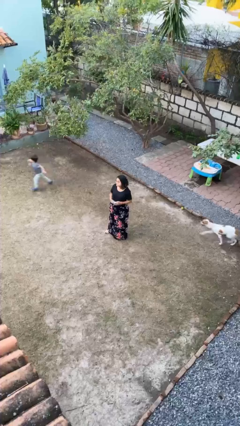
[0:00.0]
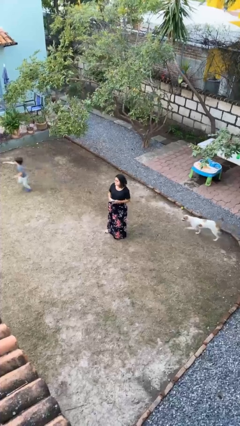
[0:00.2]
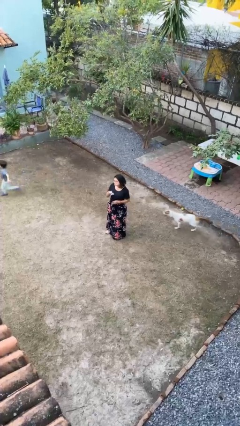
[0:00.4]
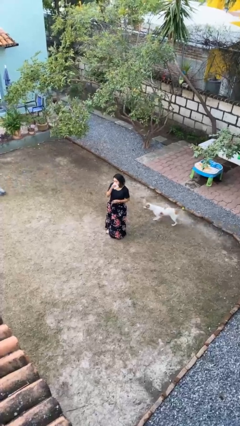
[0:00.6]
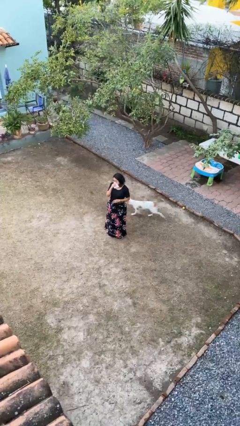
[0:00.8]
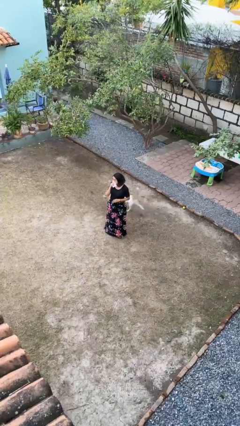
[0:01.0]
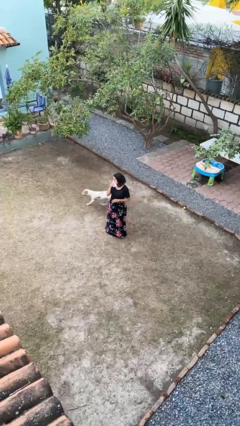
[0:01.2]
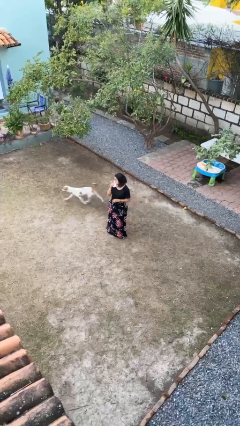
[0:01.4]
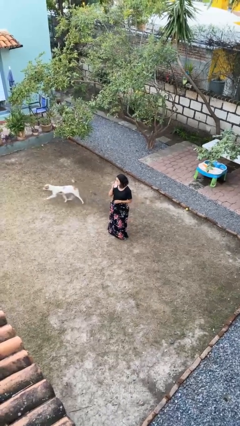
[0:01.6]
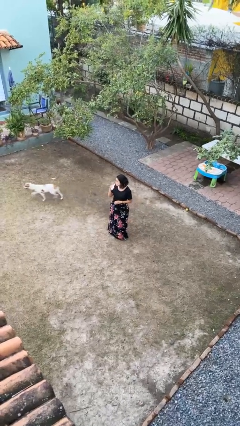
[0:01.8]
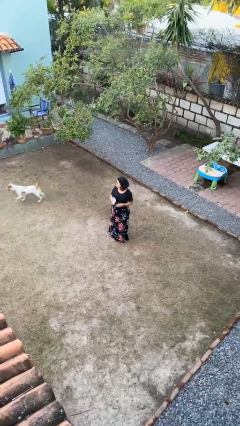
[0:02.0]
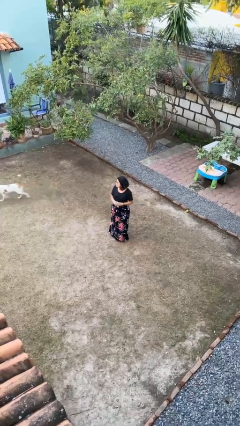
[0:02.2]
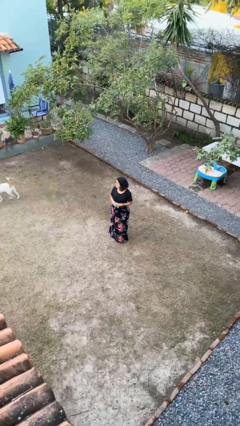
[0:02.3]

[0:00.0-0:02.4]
person wipes mouth with napkin

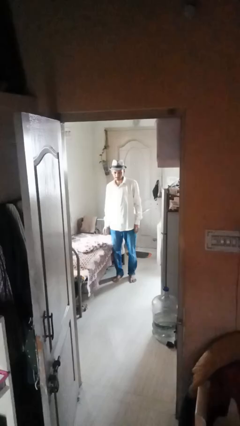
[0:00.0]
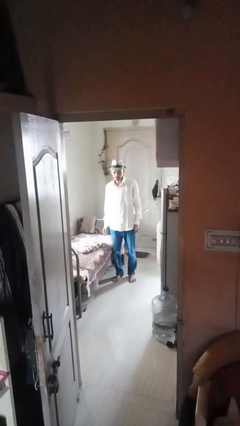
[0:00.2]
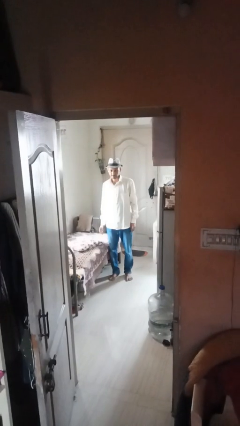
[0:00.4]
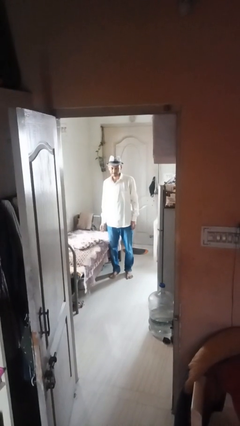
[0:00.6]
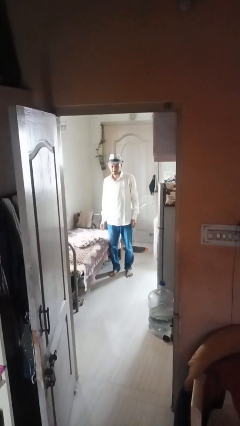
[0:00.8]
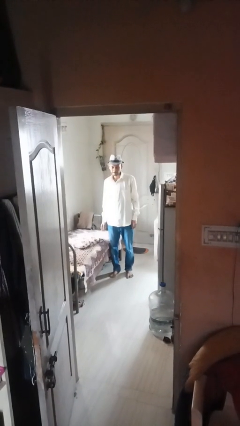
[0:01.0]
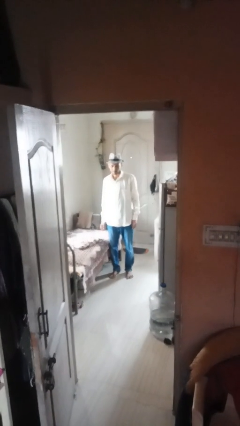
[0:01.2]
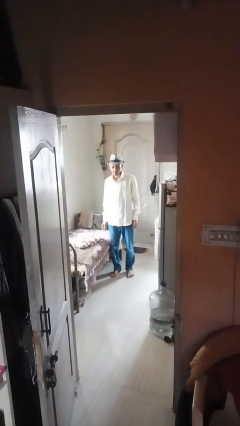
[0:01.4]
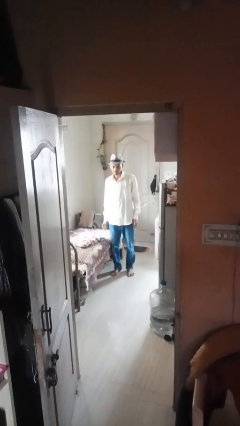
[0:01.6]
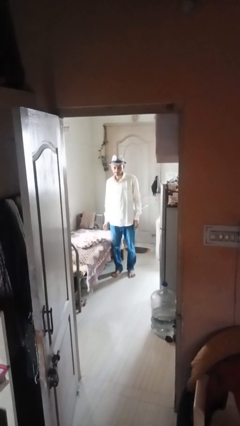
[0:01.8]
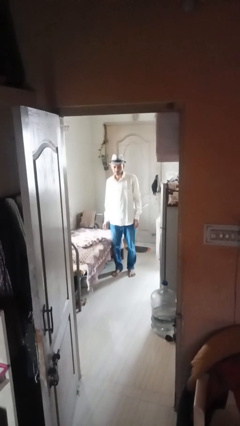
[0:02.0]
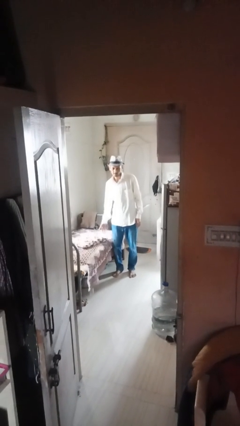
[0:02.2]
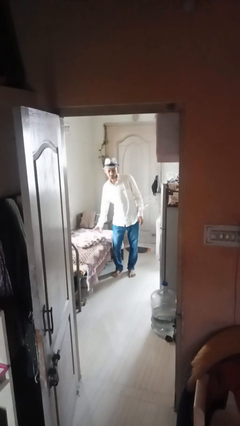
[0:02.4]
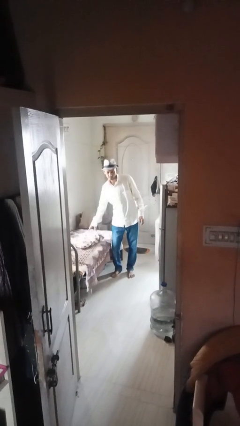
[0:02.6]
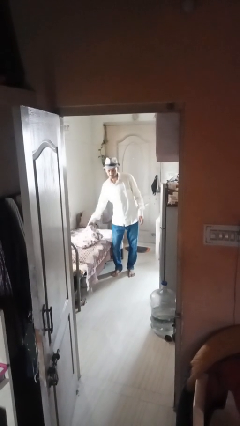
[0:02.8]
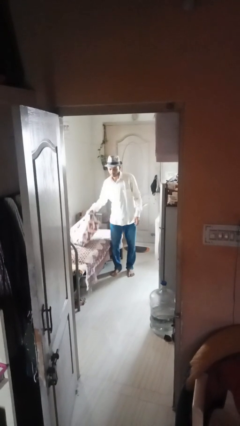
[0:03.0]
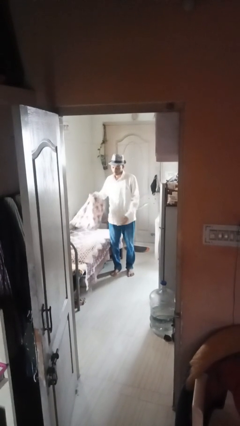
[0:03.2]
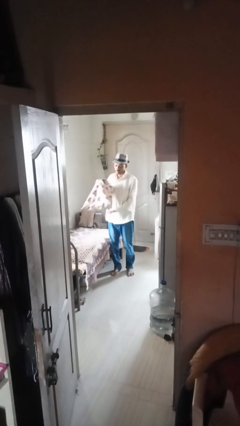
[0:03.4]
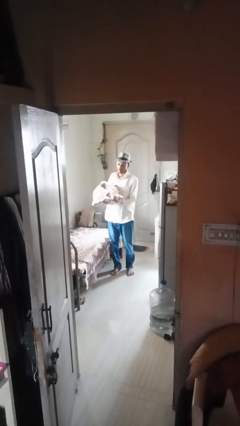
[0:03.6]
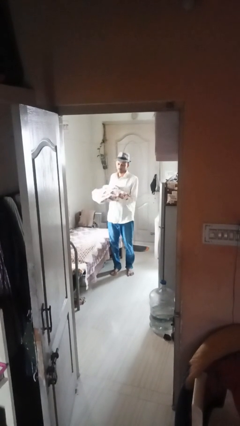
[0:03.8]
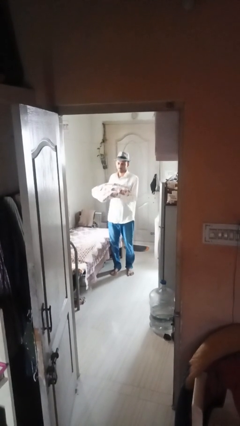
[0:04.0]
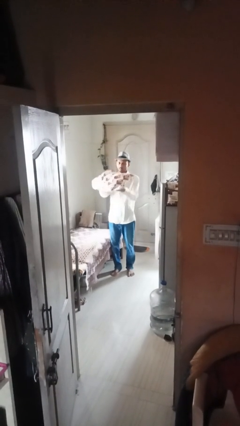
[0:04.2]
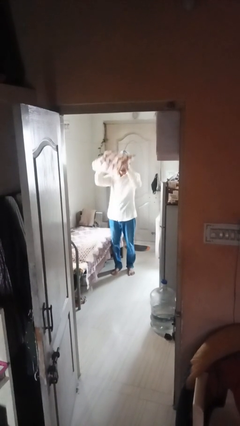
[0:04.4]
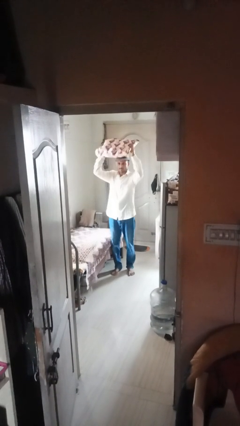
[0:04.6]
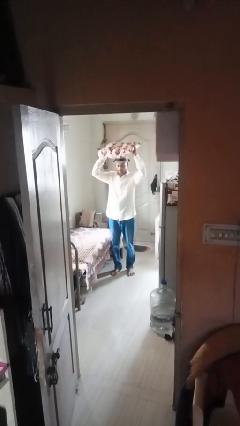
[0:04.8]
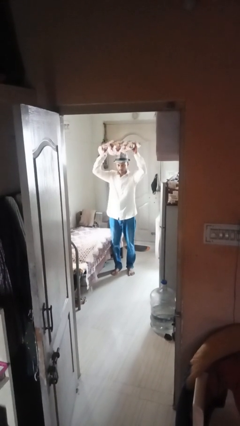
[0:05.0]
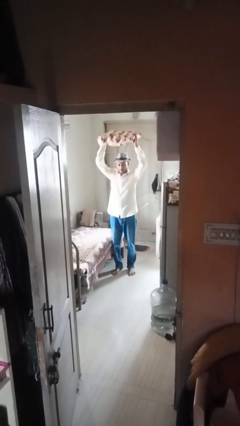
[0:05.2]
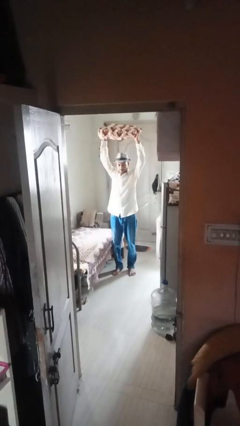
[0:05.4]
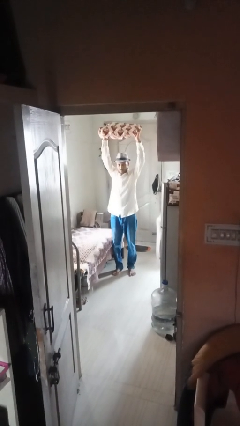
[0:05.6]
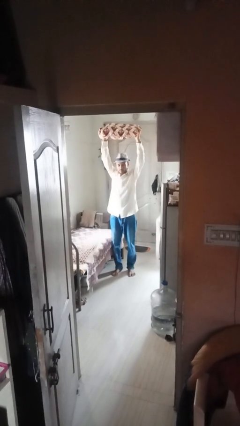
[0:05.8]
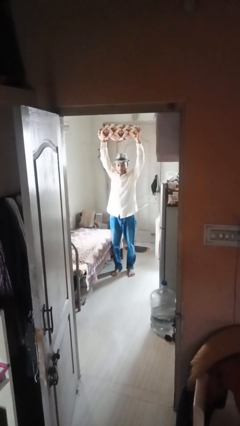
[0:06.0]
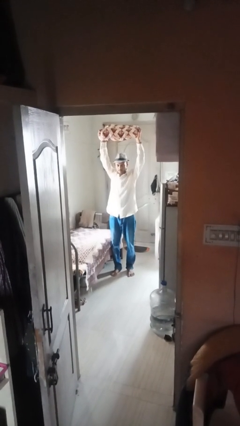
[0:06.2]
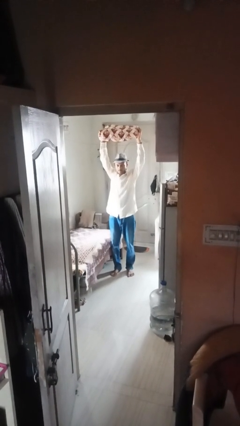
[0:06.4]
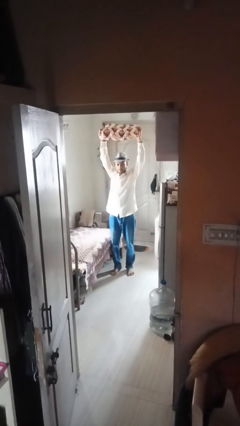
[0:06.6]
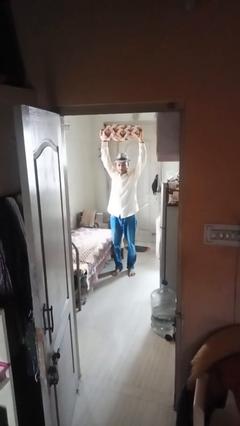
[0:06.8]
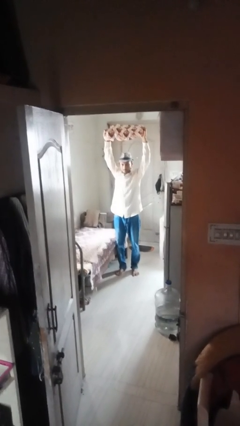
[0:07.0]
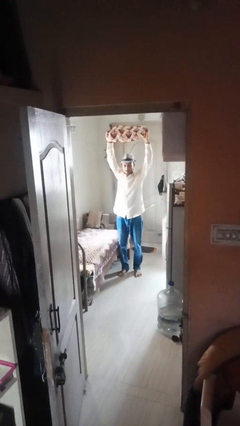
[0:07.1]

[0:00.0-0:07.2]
person holds object above head

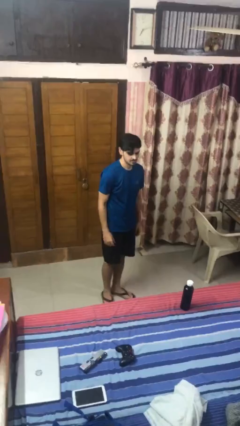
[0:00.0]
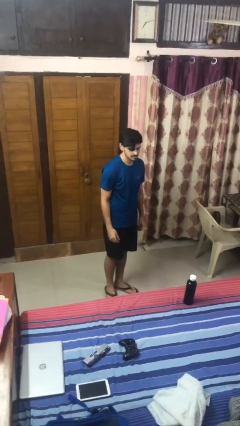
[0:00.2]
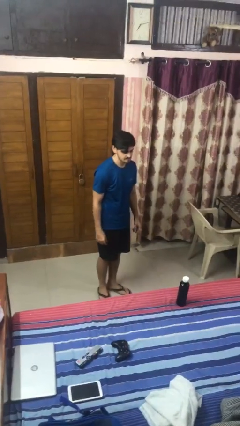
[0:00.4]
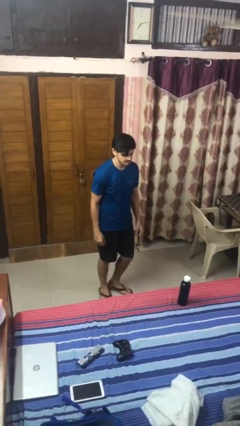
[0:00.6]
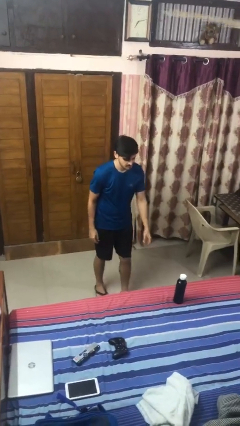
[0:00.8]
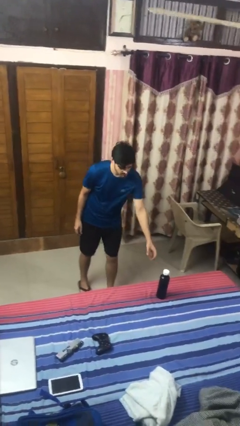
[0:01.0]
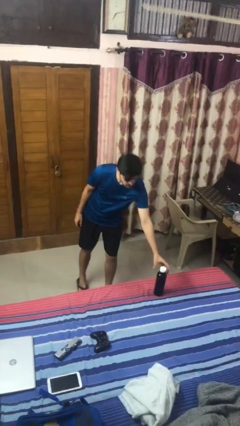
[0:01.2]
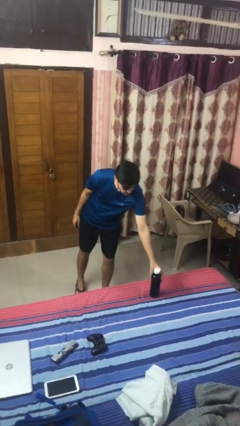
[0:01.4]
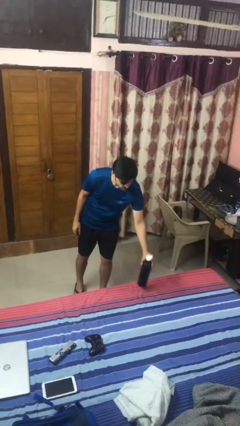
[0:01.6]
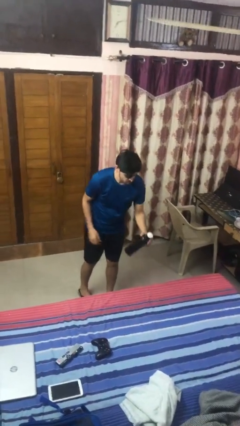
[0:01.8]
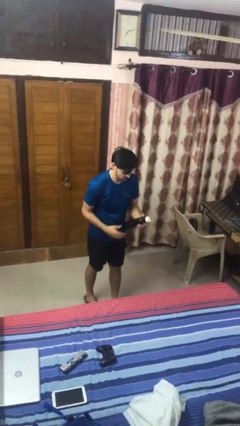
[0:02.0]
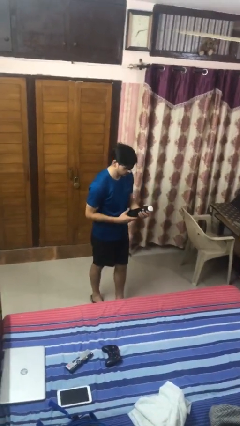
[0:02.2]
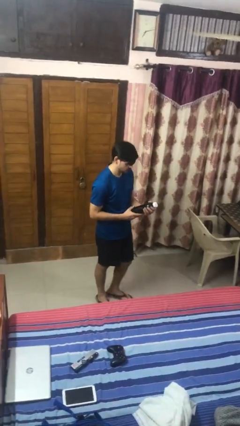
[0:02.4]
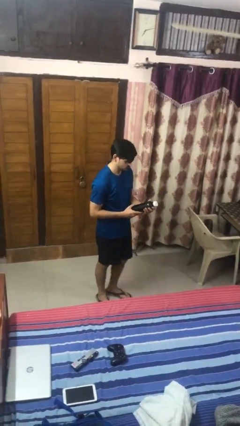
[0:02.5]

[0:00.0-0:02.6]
person picks up object from bed

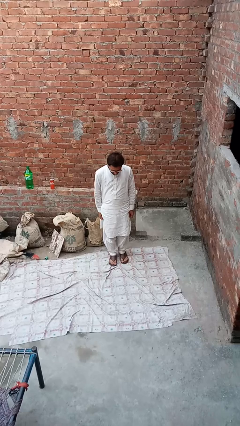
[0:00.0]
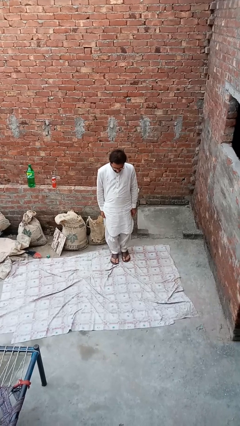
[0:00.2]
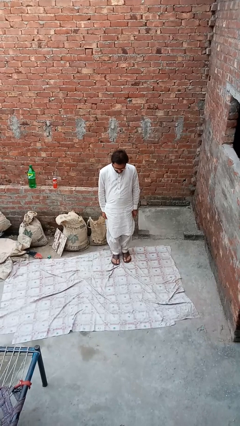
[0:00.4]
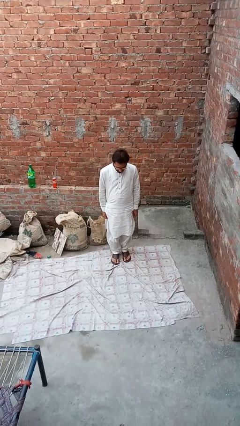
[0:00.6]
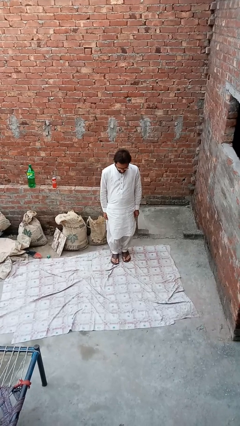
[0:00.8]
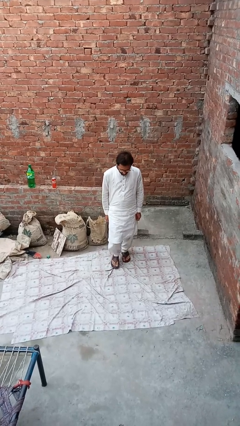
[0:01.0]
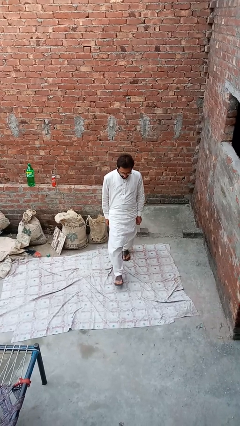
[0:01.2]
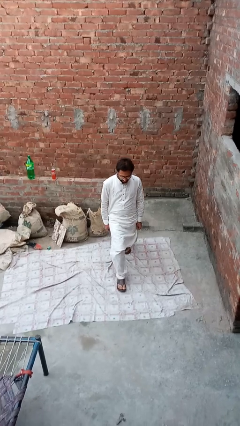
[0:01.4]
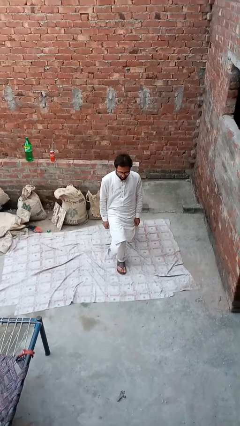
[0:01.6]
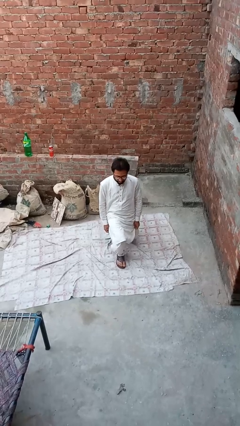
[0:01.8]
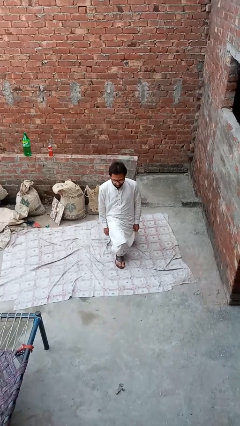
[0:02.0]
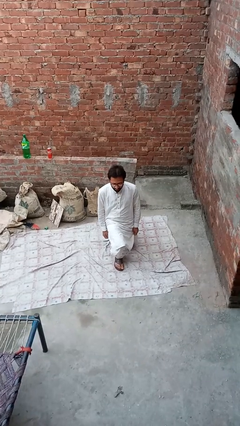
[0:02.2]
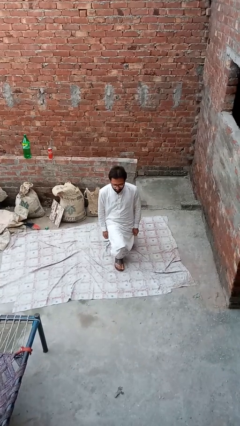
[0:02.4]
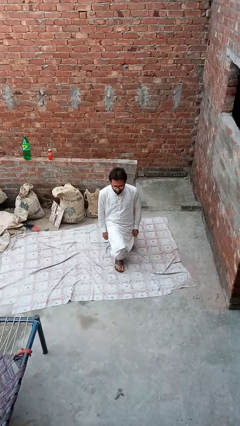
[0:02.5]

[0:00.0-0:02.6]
person exercises with lunges

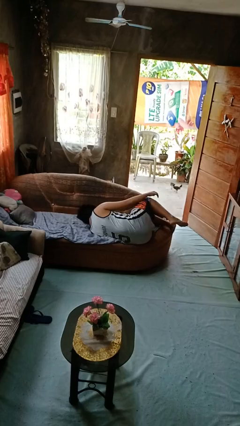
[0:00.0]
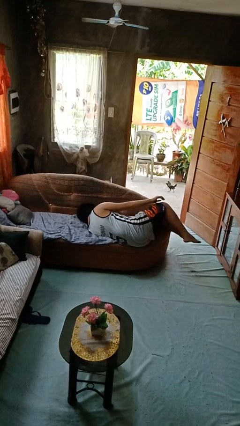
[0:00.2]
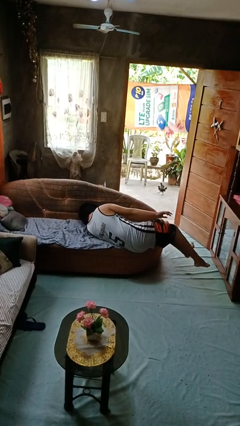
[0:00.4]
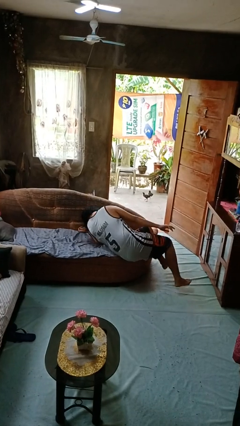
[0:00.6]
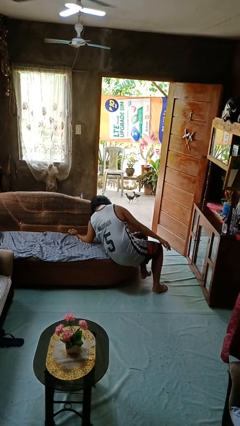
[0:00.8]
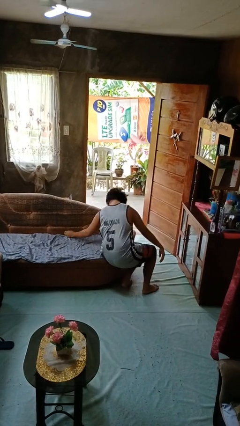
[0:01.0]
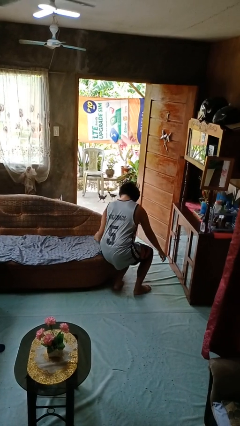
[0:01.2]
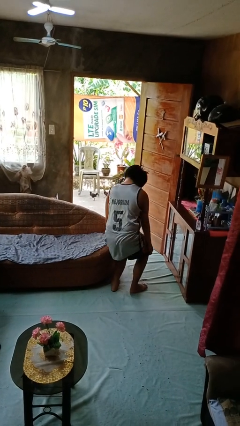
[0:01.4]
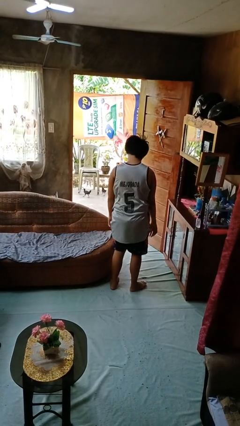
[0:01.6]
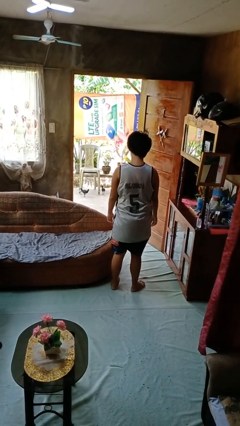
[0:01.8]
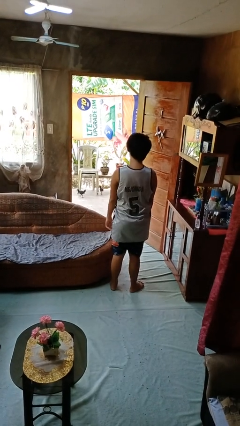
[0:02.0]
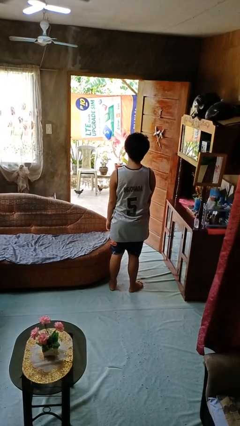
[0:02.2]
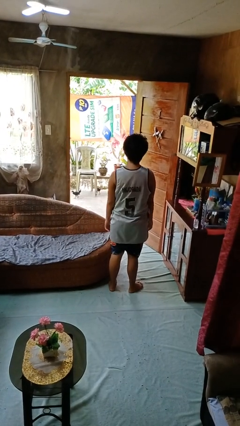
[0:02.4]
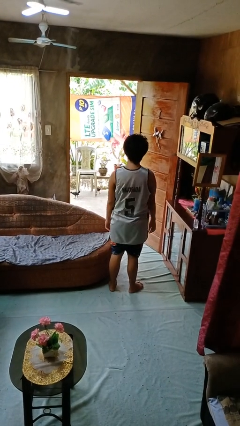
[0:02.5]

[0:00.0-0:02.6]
person stands up

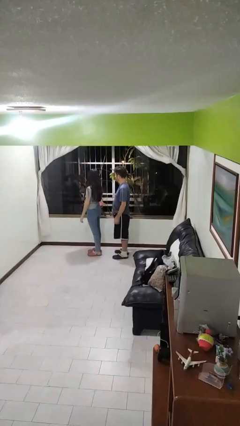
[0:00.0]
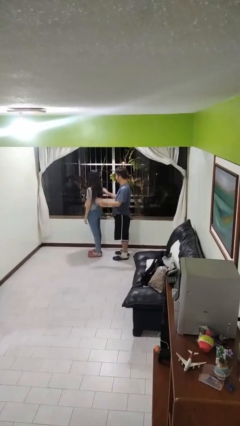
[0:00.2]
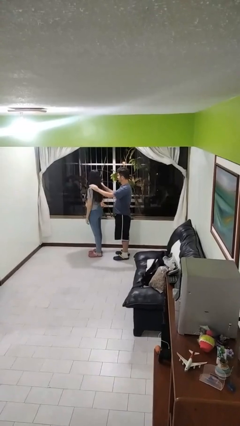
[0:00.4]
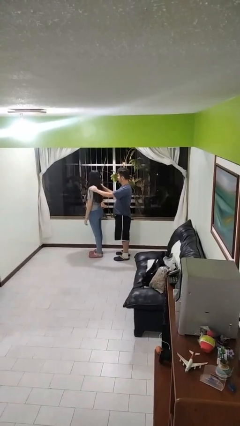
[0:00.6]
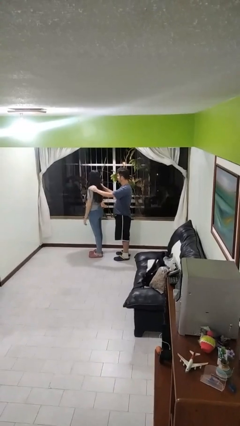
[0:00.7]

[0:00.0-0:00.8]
person grabs person by shoulder
